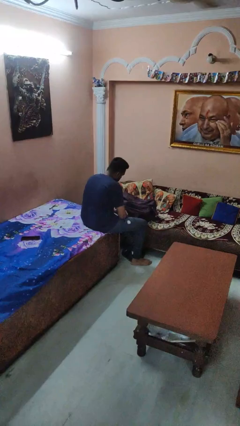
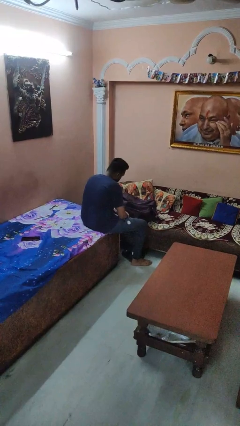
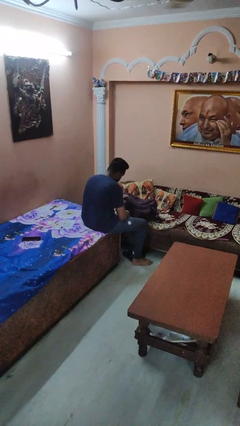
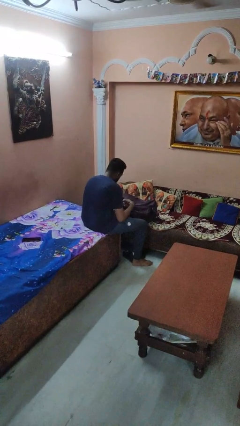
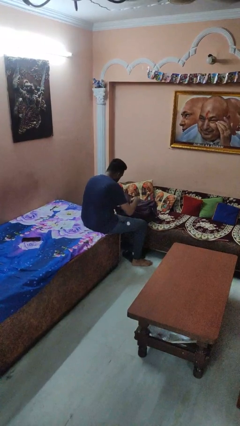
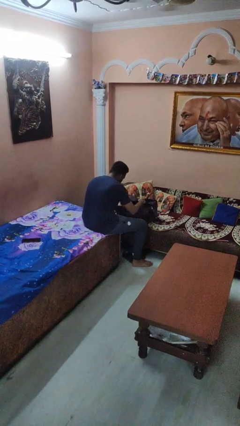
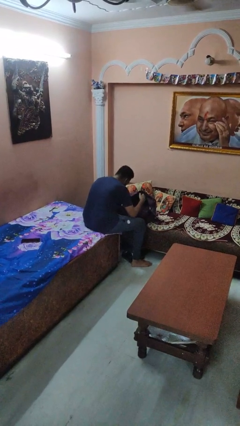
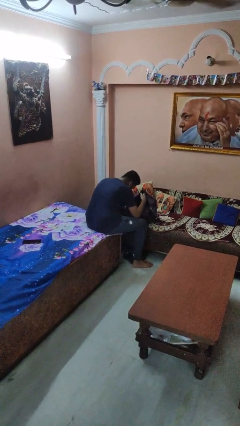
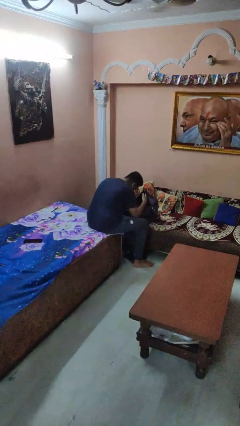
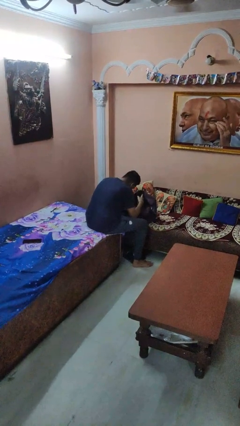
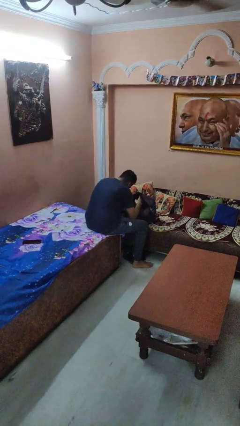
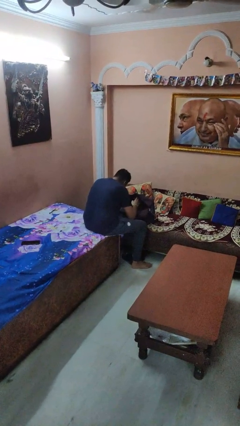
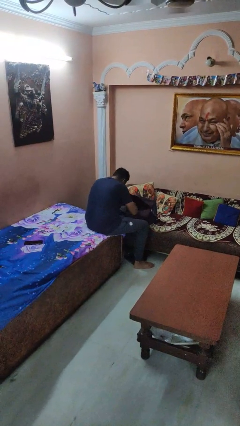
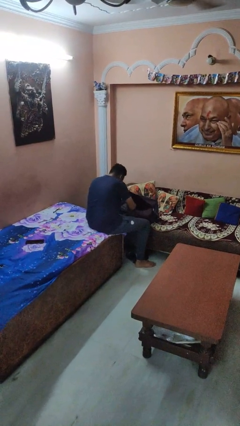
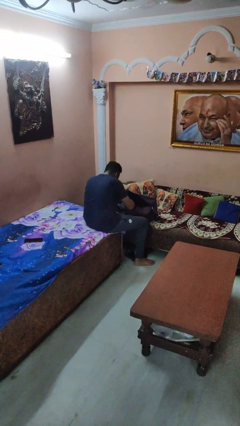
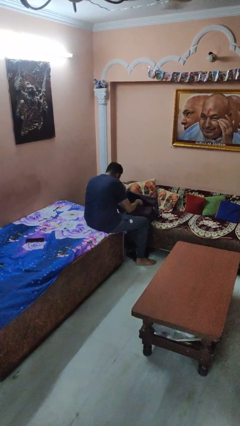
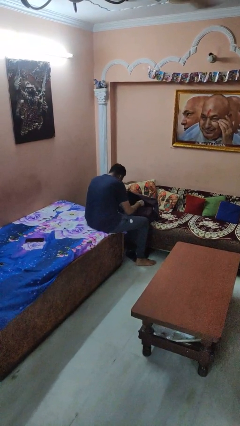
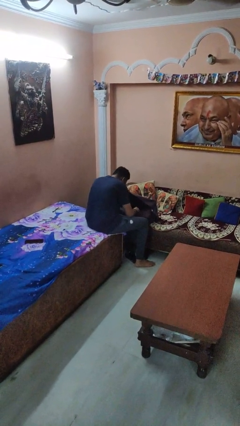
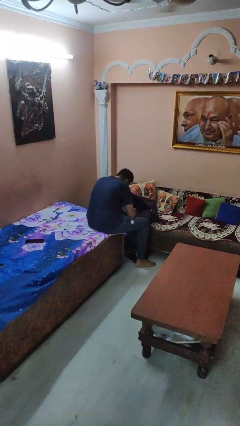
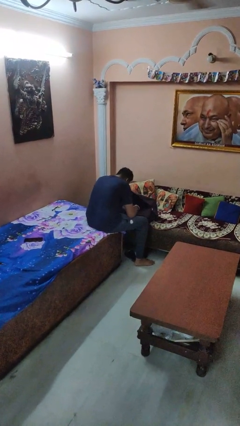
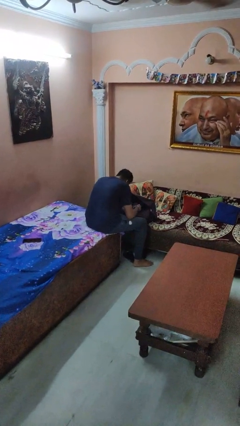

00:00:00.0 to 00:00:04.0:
person searches in bag

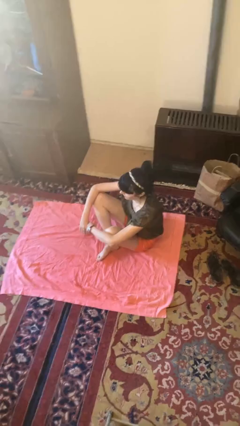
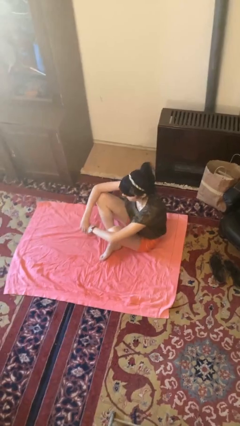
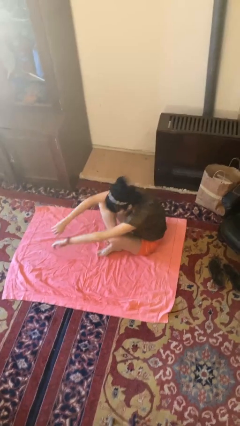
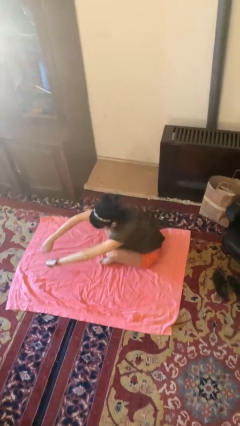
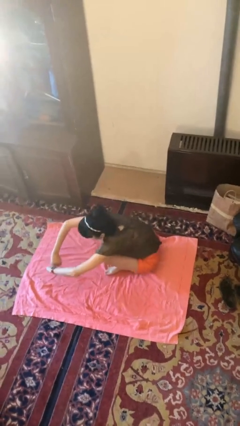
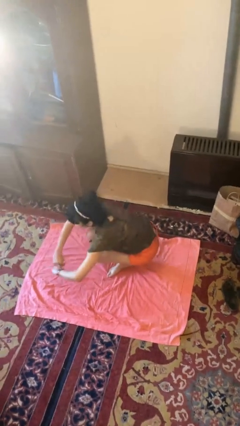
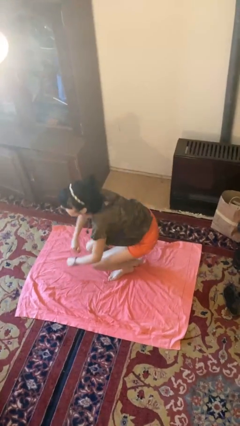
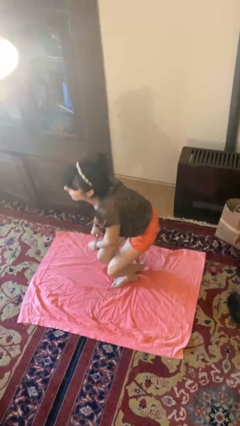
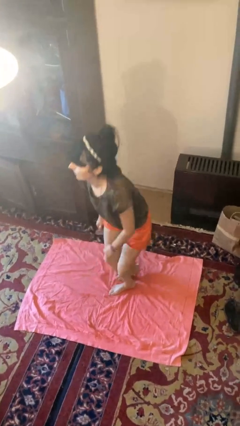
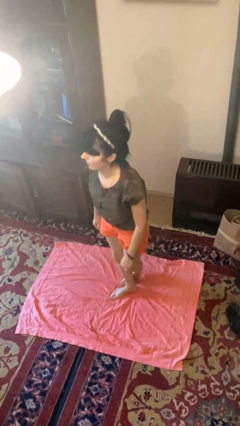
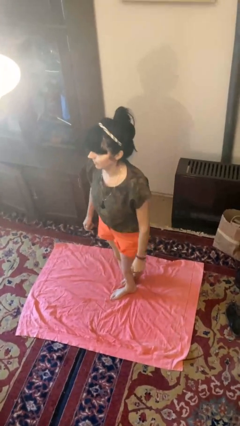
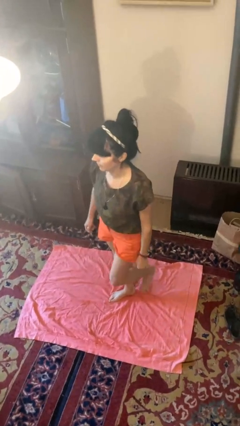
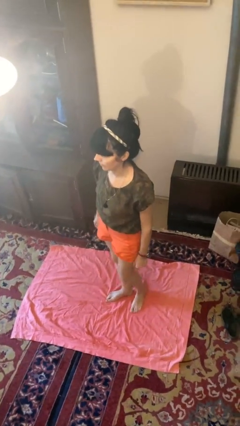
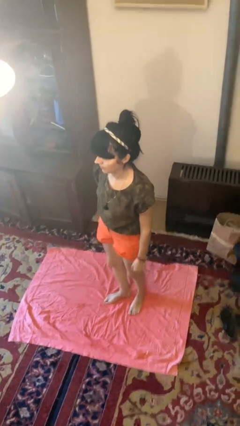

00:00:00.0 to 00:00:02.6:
person stands up from floor

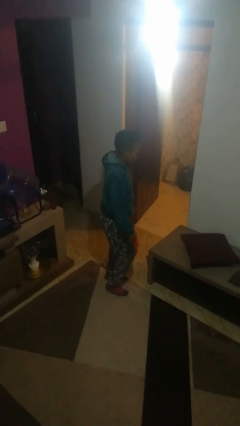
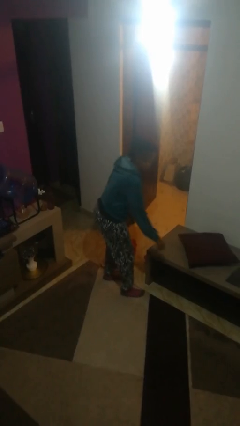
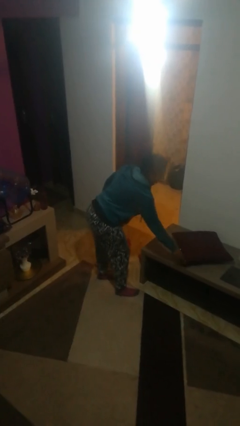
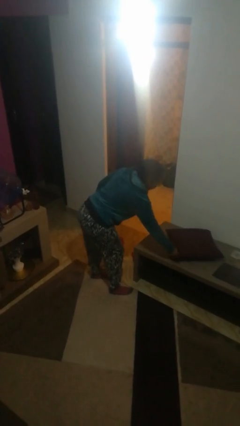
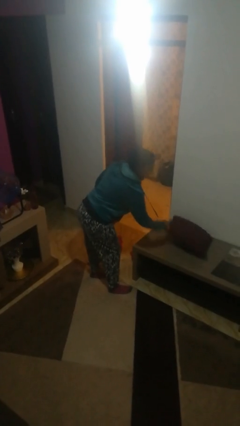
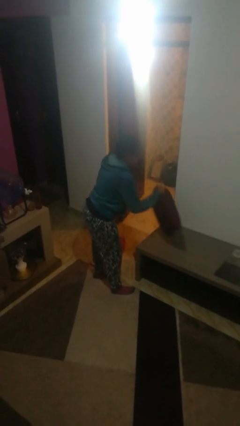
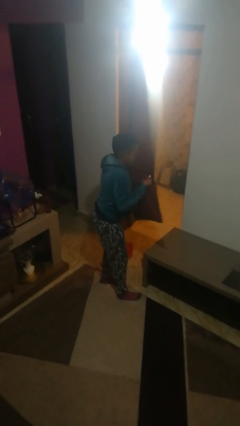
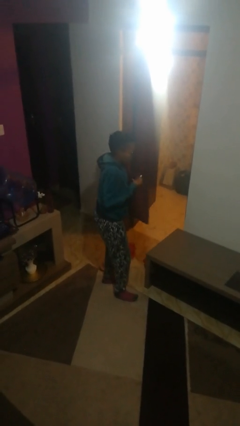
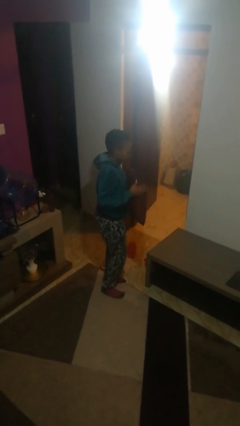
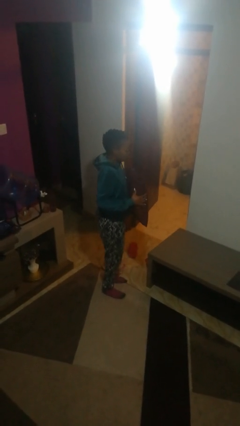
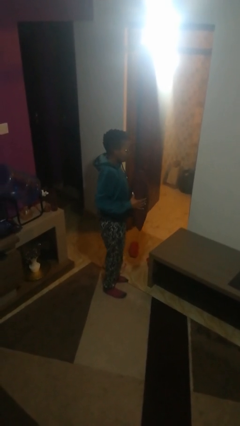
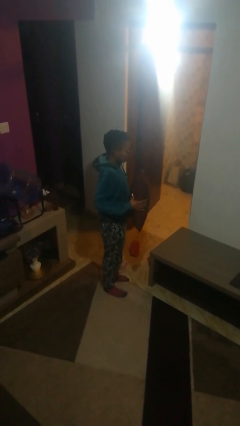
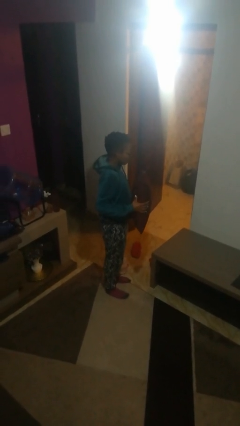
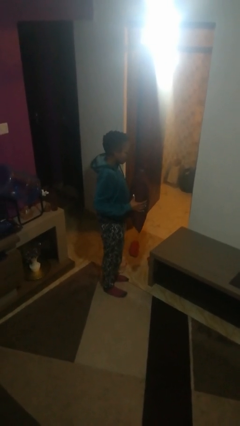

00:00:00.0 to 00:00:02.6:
person picks up object from table

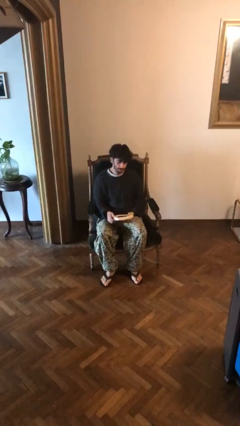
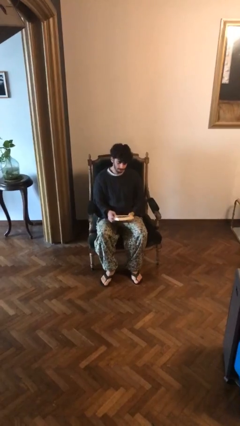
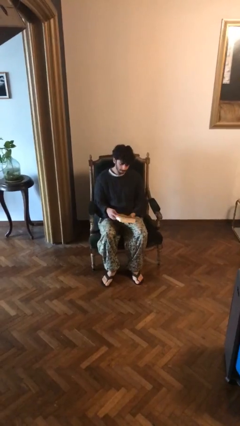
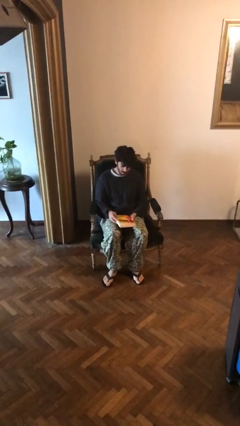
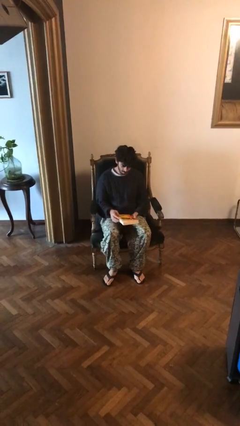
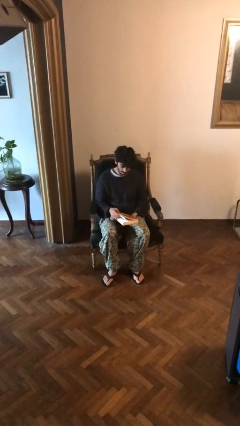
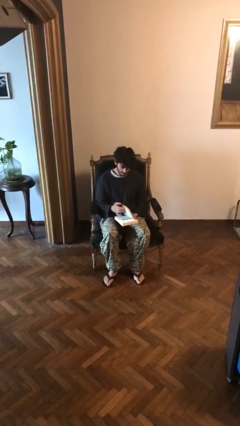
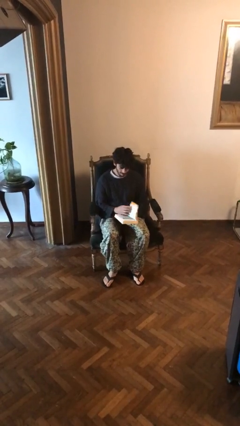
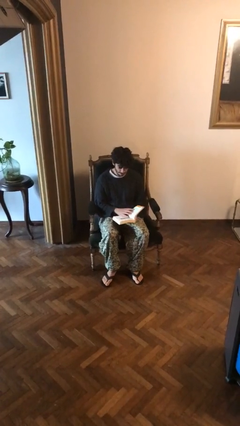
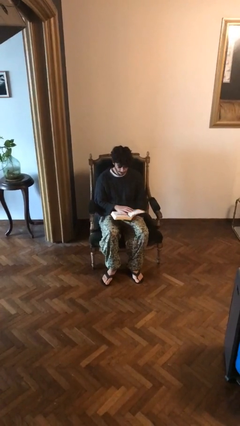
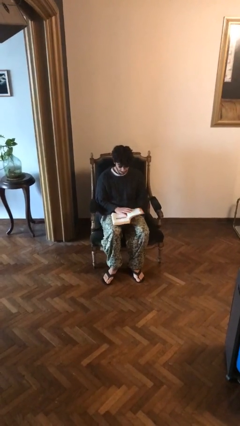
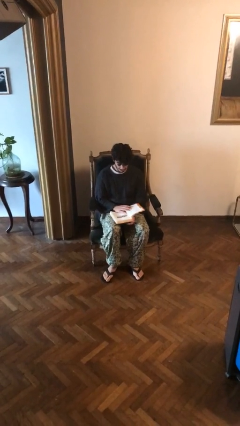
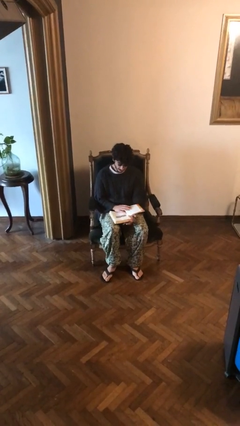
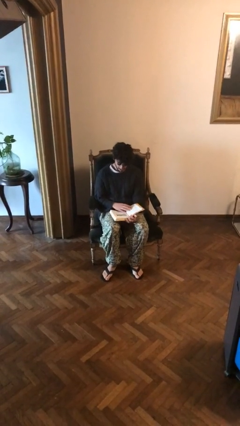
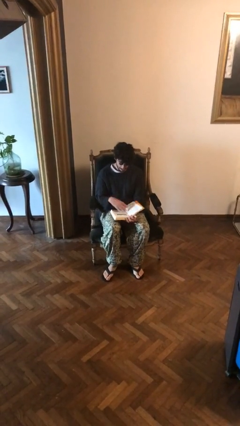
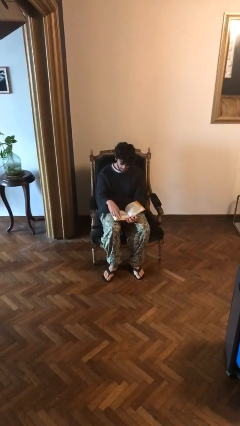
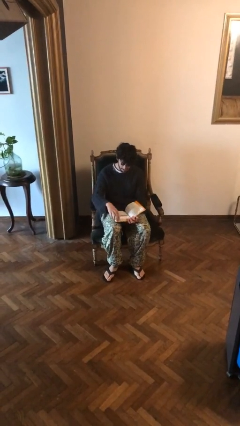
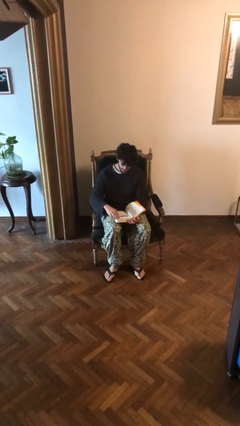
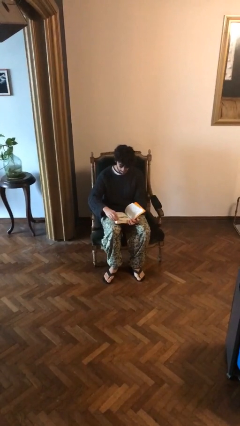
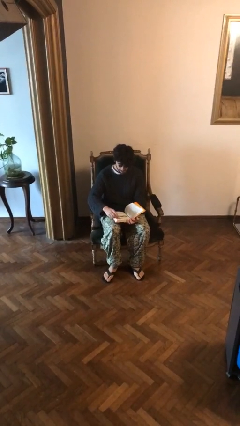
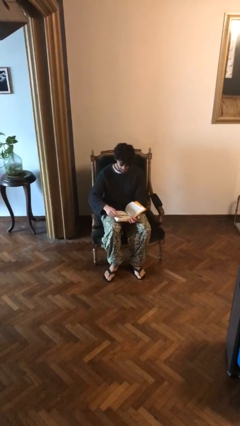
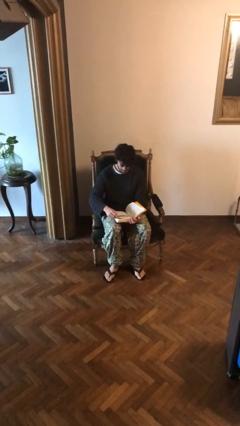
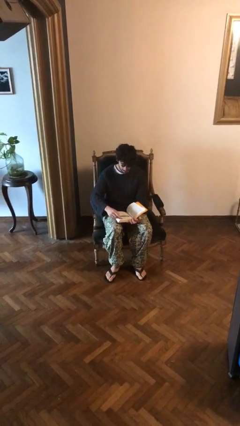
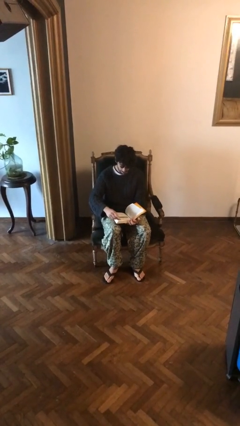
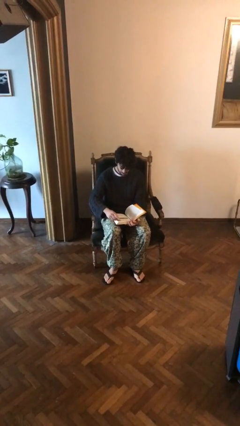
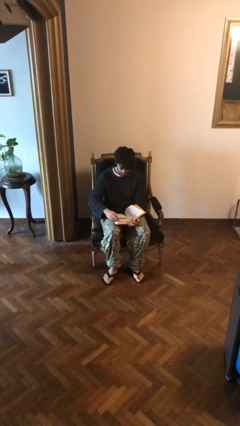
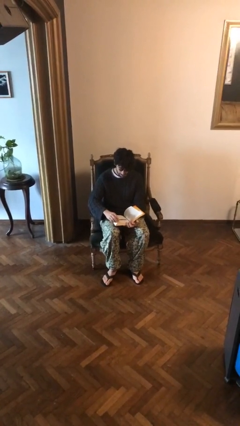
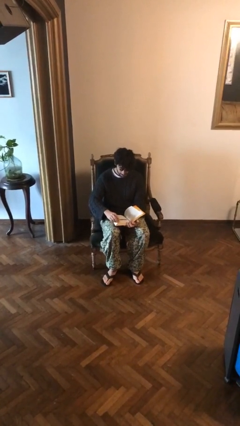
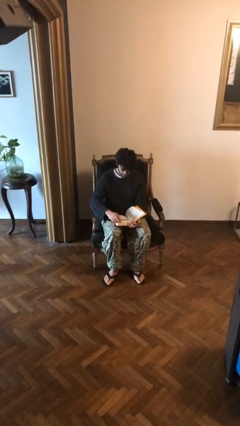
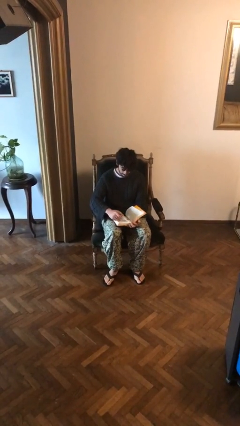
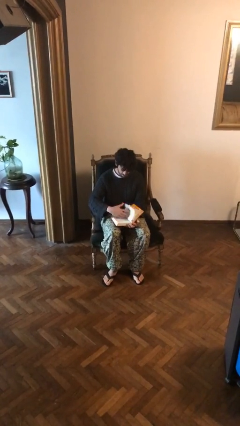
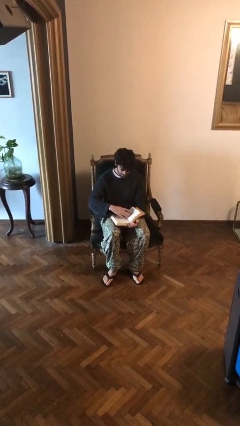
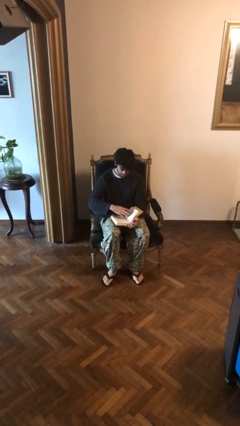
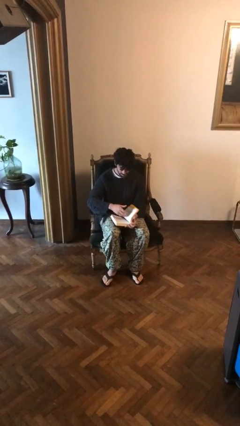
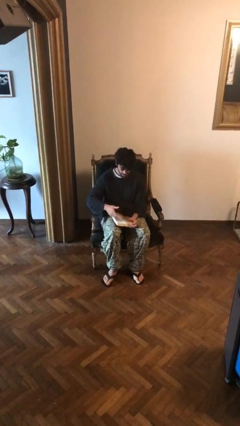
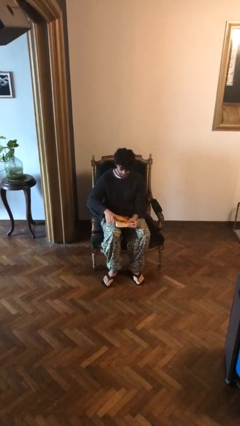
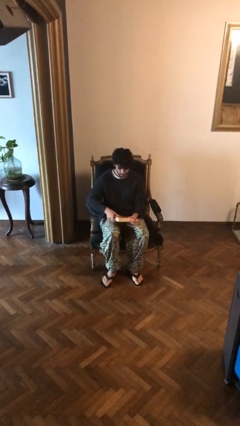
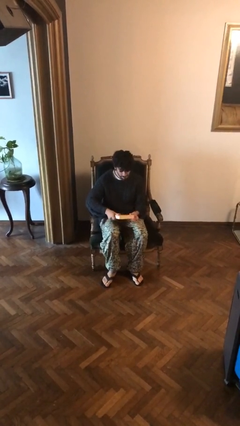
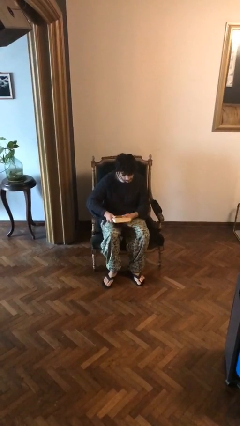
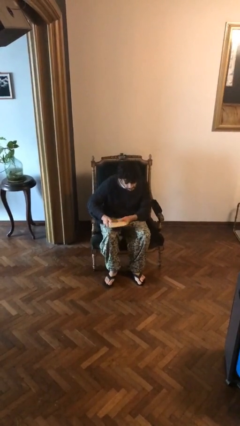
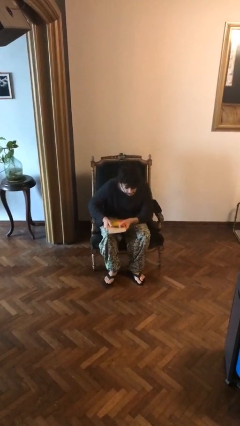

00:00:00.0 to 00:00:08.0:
person reads document
